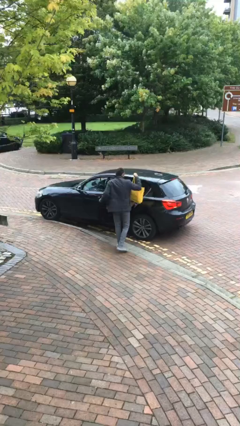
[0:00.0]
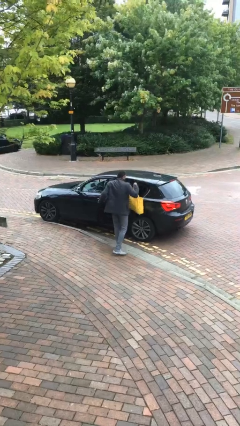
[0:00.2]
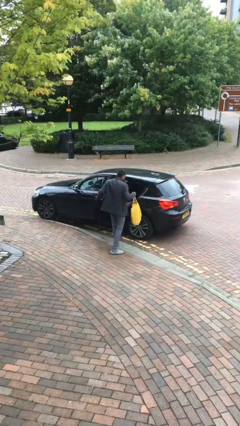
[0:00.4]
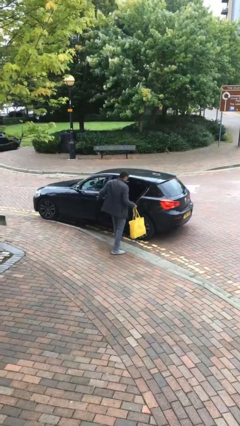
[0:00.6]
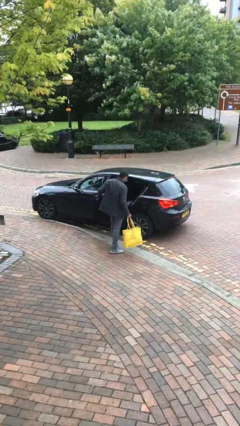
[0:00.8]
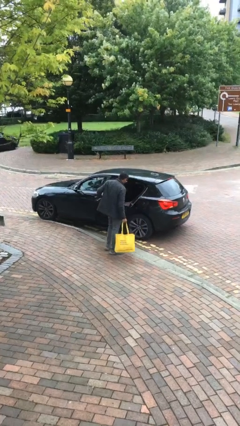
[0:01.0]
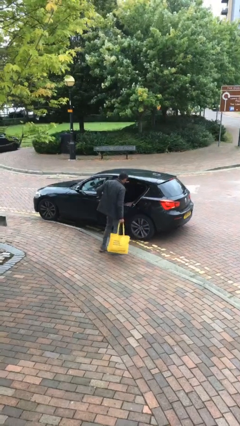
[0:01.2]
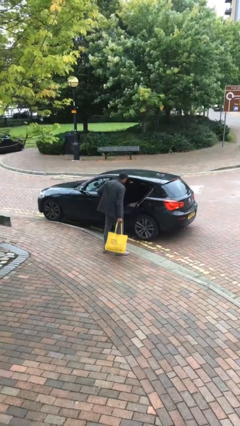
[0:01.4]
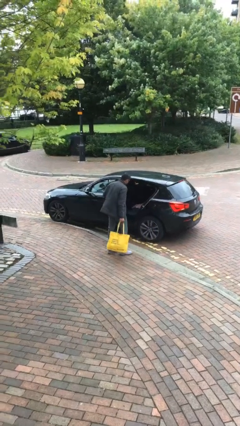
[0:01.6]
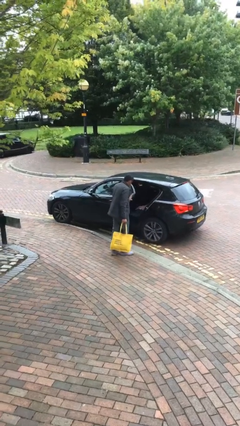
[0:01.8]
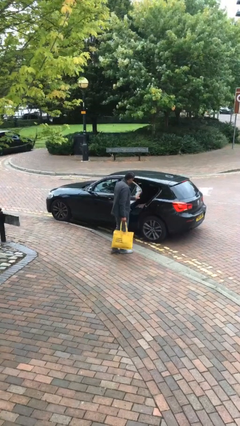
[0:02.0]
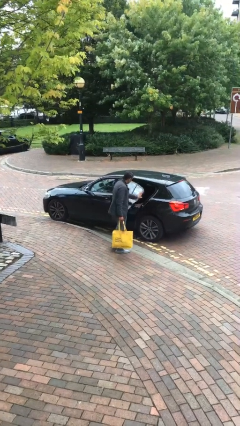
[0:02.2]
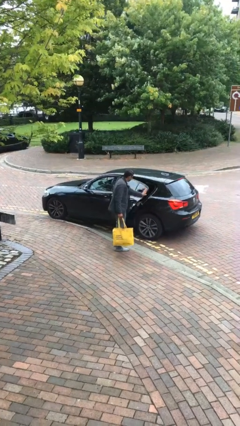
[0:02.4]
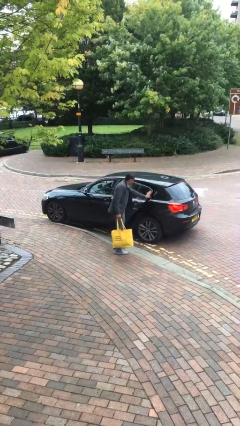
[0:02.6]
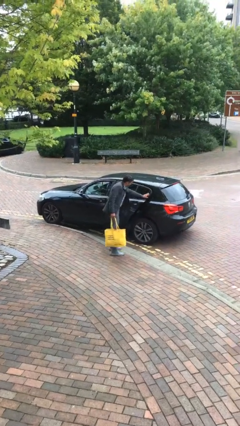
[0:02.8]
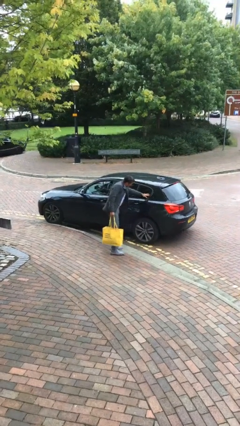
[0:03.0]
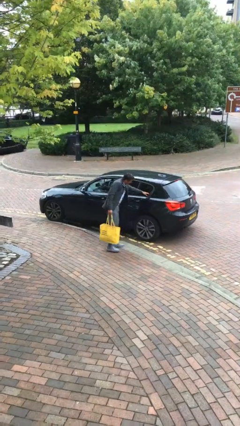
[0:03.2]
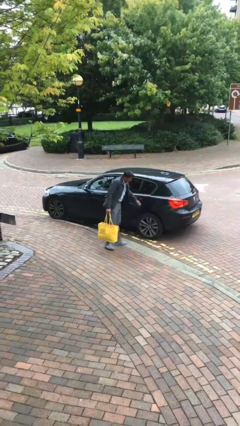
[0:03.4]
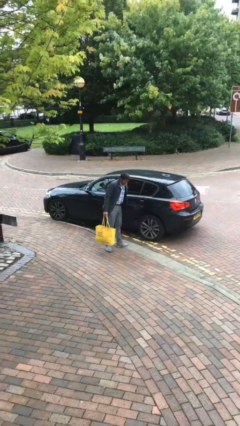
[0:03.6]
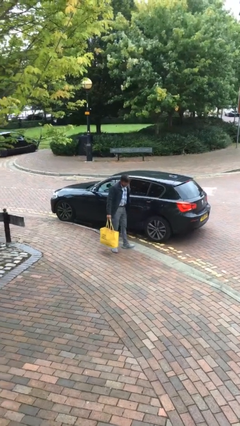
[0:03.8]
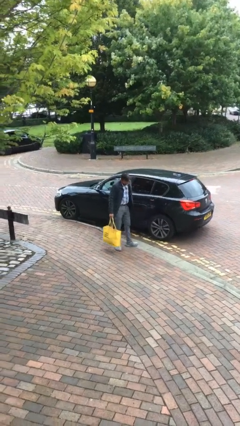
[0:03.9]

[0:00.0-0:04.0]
person closes car door

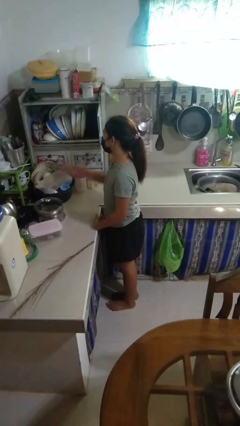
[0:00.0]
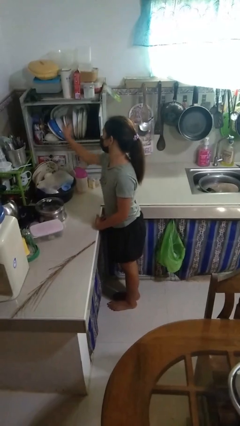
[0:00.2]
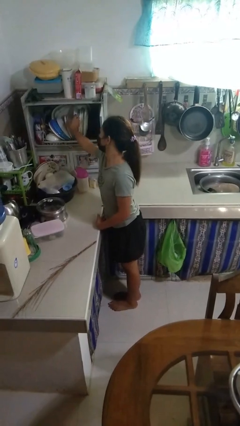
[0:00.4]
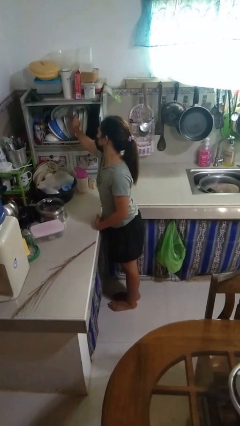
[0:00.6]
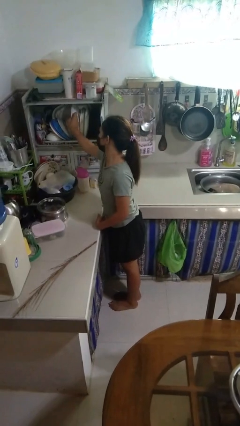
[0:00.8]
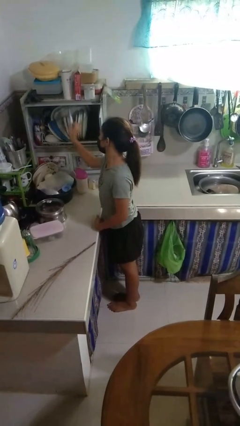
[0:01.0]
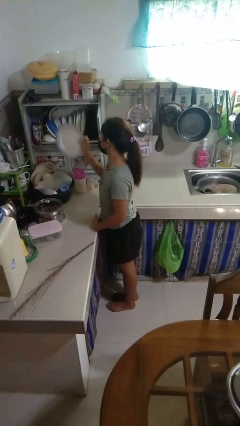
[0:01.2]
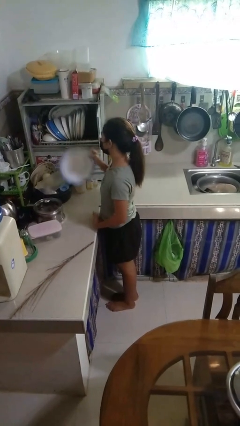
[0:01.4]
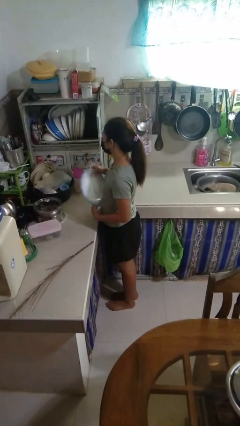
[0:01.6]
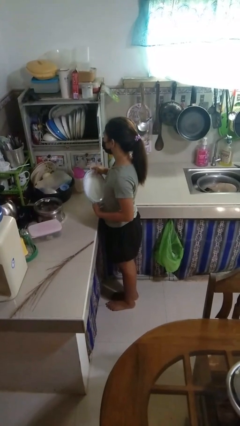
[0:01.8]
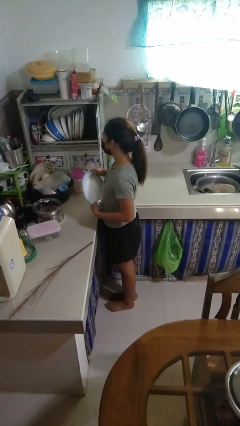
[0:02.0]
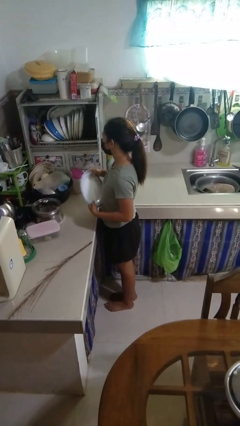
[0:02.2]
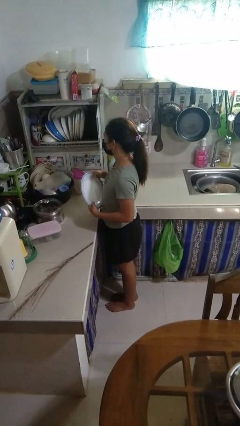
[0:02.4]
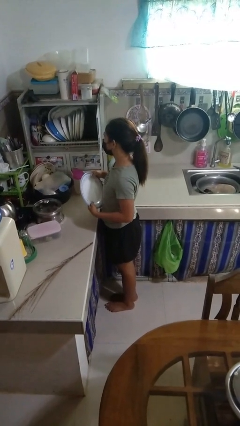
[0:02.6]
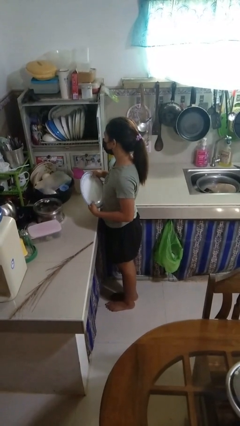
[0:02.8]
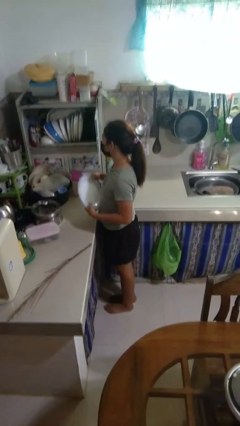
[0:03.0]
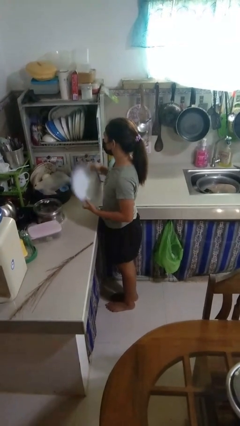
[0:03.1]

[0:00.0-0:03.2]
person takes object from kitchen drawer

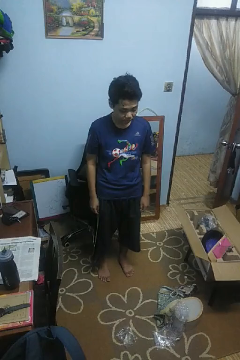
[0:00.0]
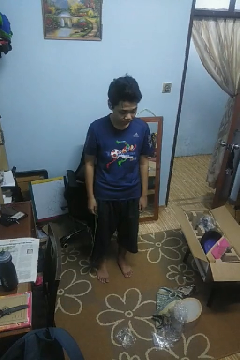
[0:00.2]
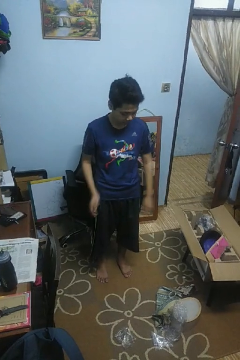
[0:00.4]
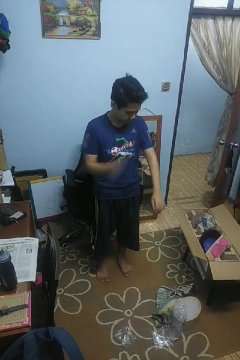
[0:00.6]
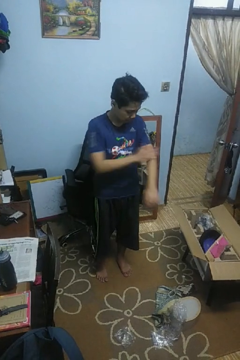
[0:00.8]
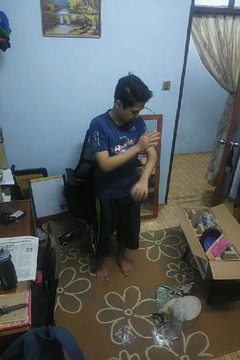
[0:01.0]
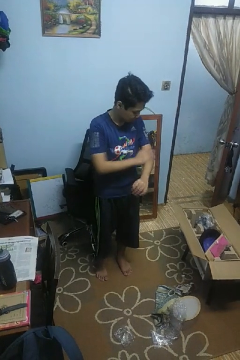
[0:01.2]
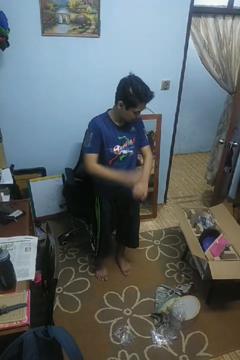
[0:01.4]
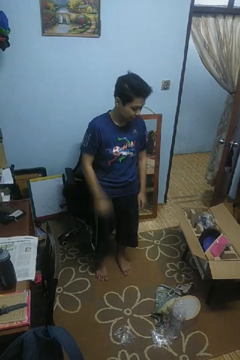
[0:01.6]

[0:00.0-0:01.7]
person swats bug

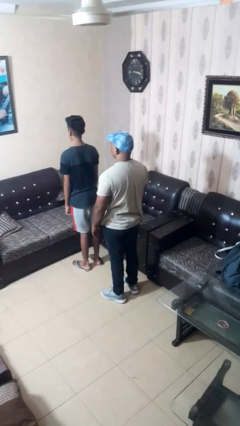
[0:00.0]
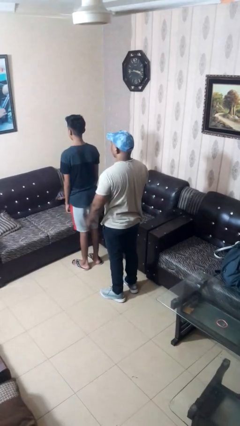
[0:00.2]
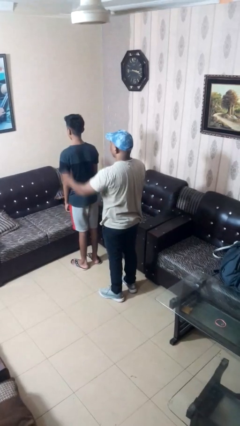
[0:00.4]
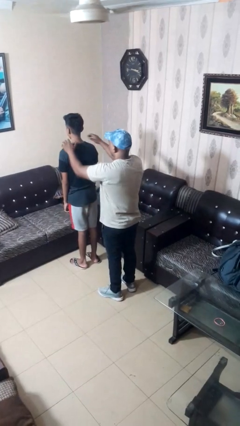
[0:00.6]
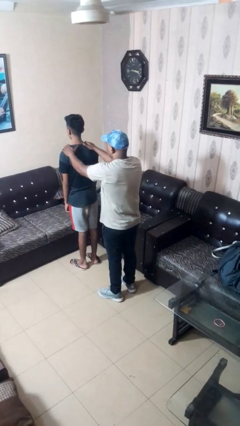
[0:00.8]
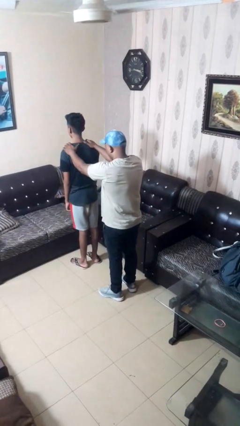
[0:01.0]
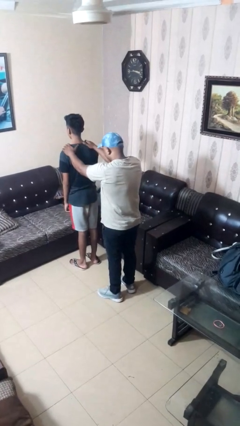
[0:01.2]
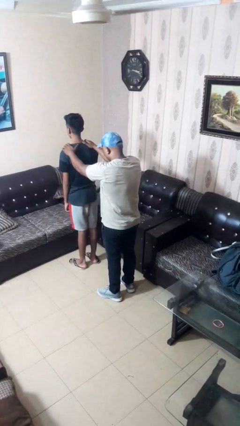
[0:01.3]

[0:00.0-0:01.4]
person grabs person by shoulder

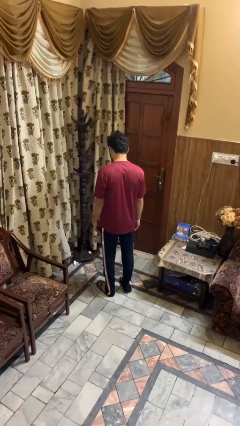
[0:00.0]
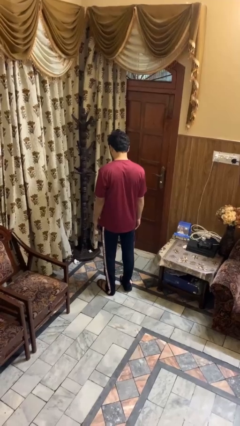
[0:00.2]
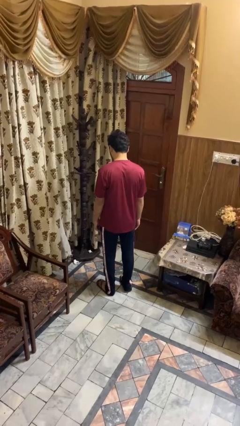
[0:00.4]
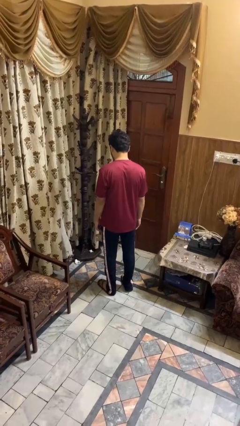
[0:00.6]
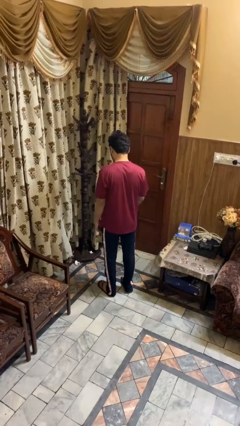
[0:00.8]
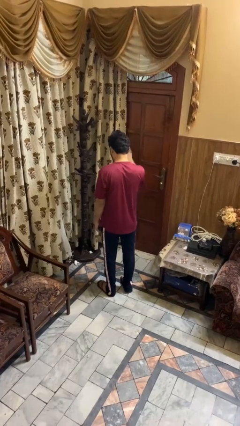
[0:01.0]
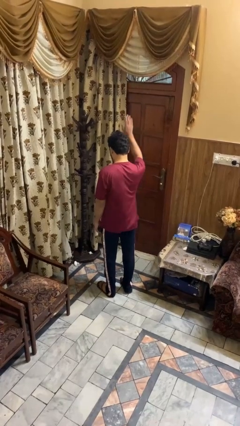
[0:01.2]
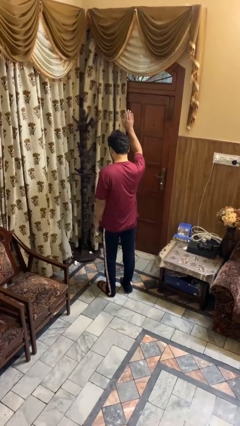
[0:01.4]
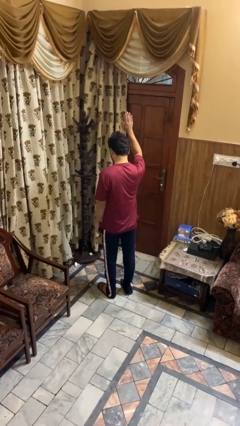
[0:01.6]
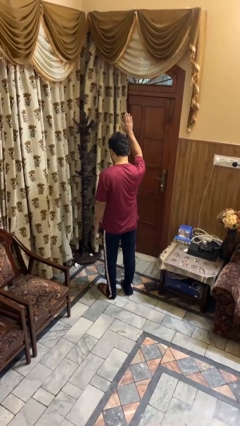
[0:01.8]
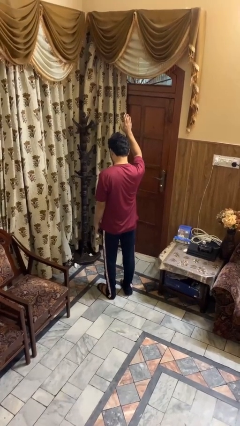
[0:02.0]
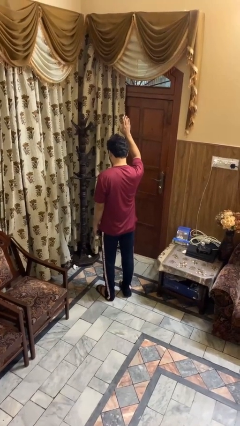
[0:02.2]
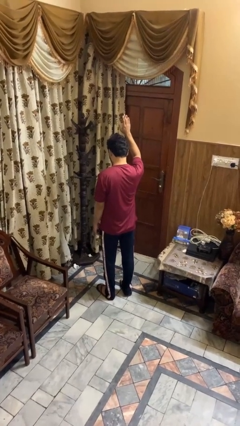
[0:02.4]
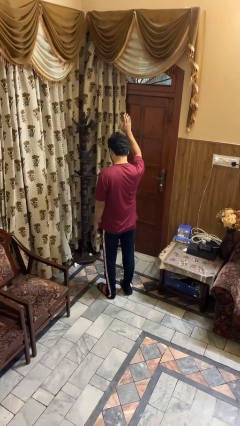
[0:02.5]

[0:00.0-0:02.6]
person gestures raise hand

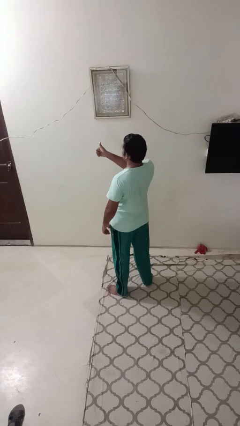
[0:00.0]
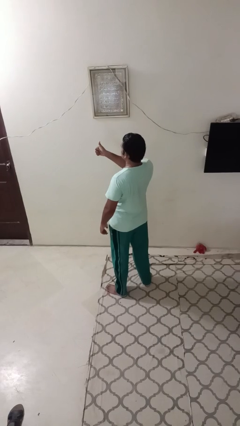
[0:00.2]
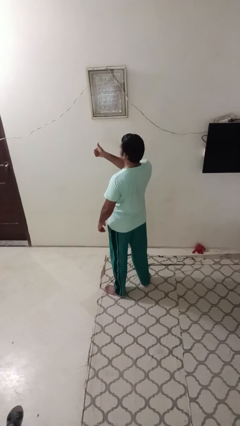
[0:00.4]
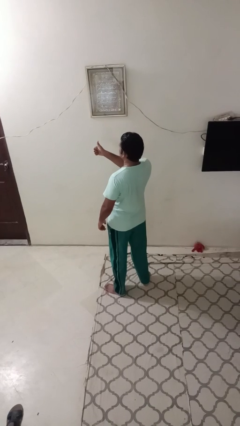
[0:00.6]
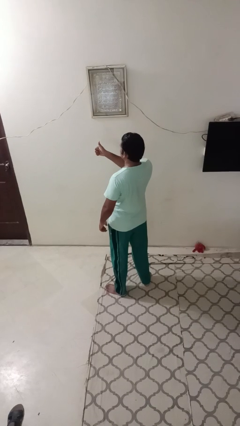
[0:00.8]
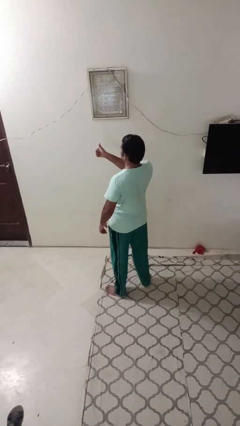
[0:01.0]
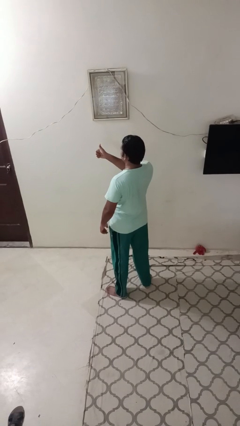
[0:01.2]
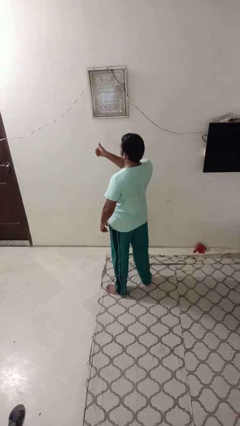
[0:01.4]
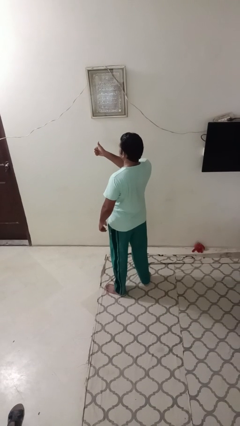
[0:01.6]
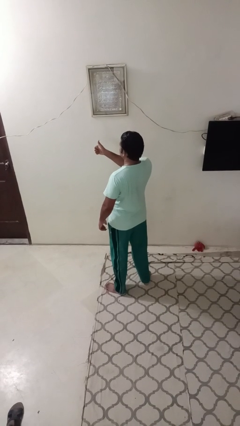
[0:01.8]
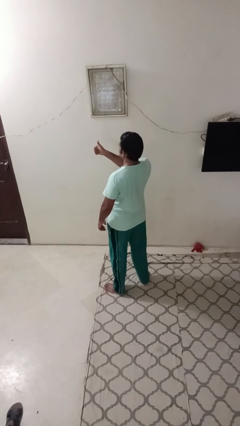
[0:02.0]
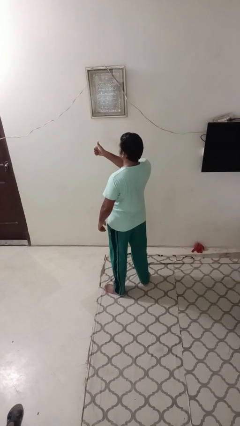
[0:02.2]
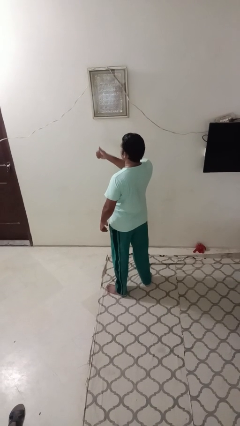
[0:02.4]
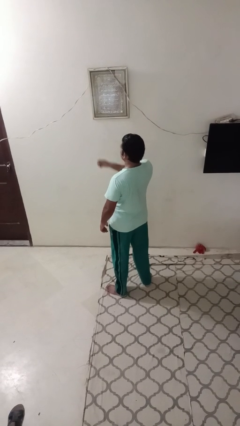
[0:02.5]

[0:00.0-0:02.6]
person gestures thumbs up

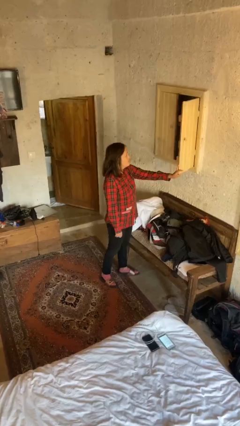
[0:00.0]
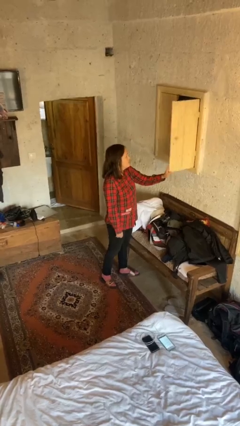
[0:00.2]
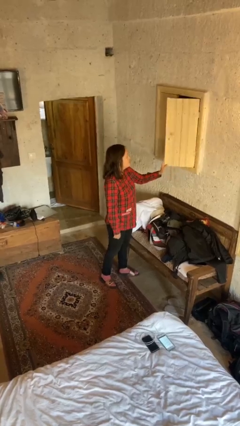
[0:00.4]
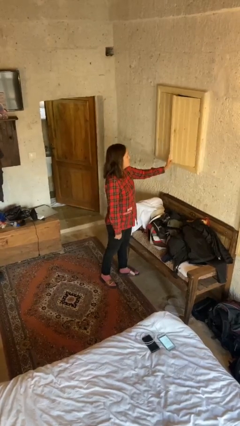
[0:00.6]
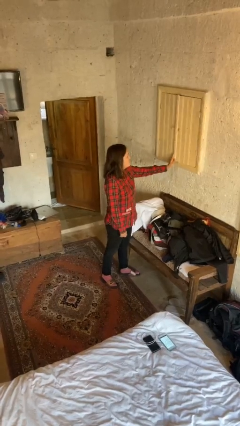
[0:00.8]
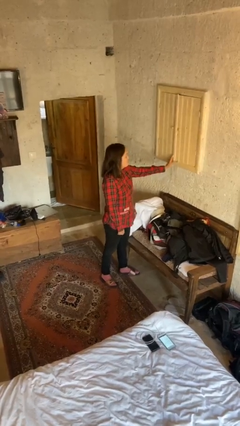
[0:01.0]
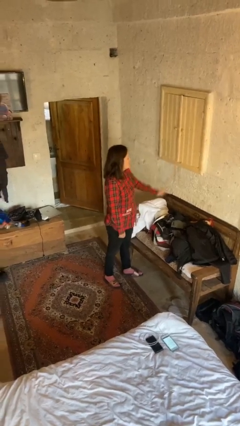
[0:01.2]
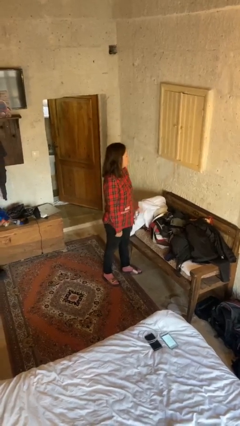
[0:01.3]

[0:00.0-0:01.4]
person closes closet door

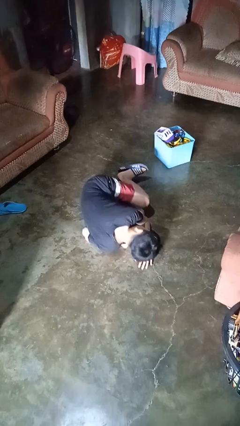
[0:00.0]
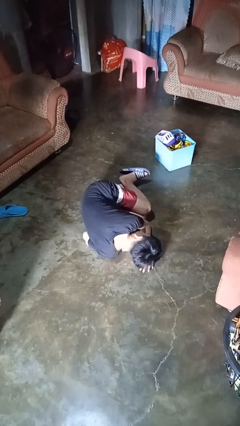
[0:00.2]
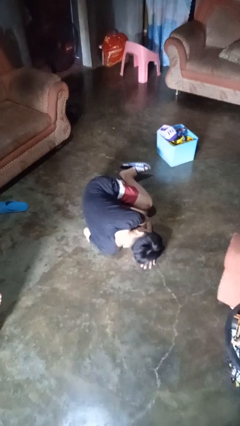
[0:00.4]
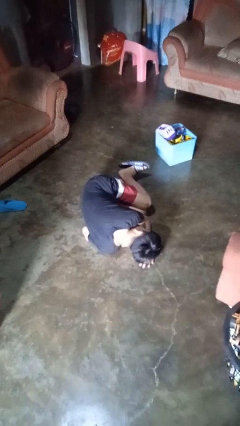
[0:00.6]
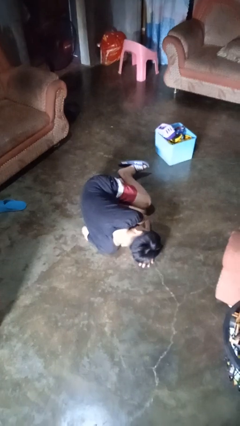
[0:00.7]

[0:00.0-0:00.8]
person lies down on floor
